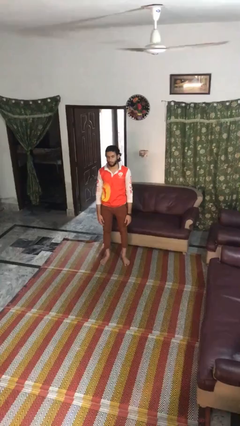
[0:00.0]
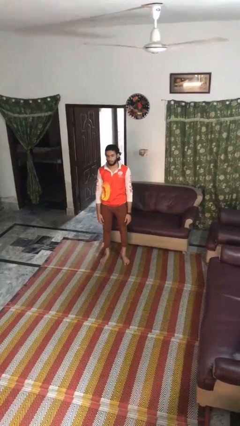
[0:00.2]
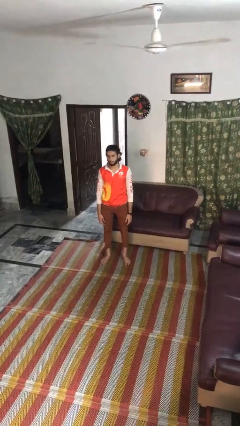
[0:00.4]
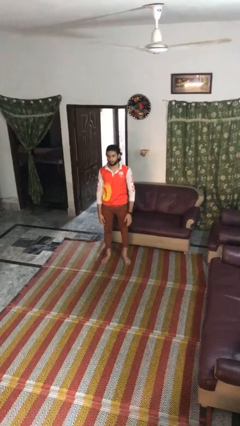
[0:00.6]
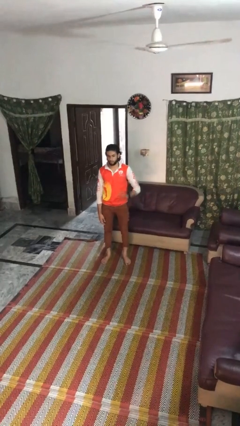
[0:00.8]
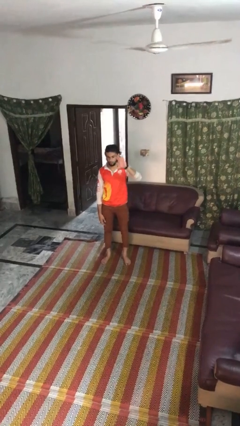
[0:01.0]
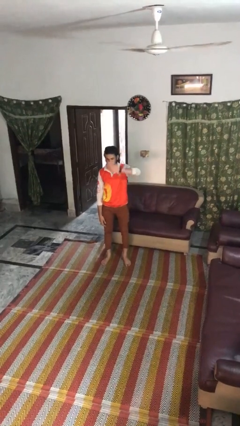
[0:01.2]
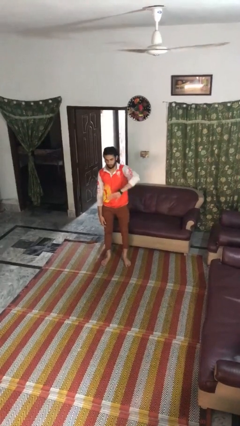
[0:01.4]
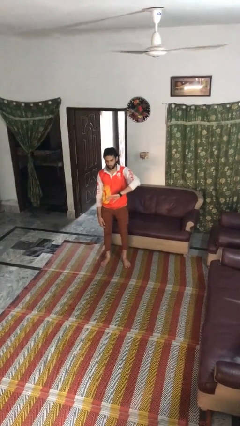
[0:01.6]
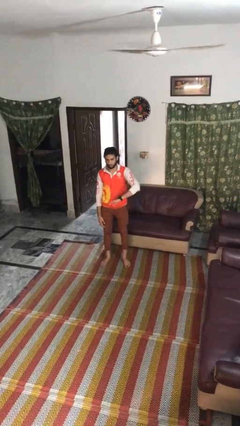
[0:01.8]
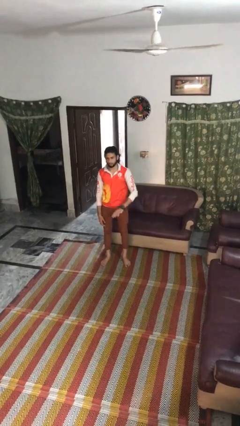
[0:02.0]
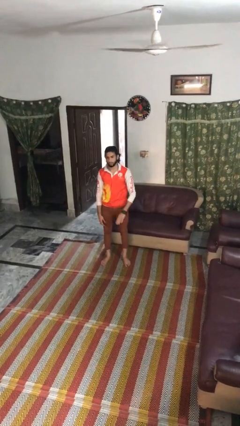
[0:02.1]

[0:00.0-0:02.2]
person gestures swipe down

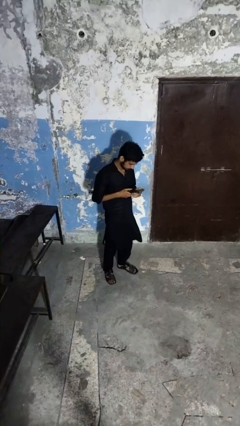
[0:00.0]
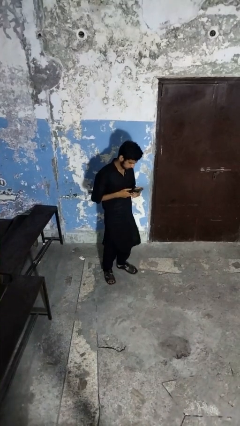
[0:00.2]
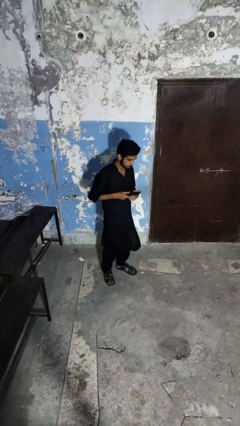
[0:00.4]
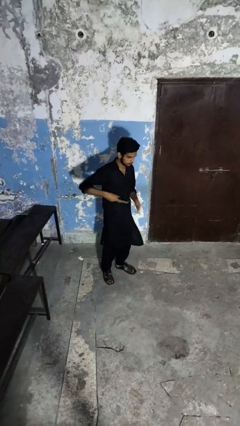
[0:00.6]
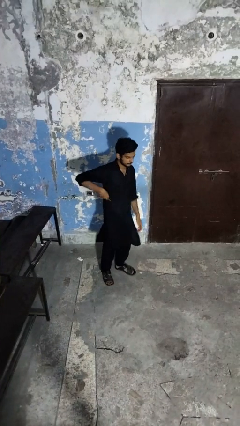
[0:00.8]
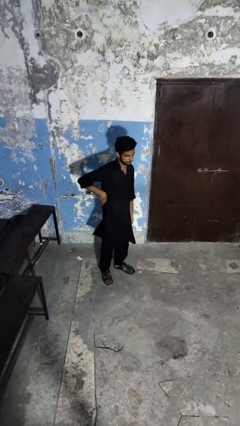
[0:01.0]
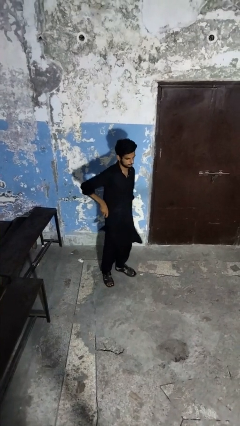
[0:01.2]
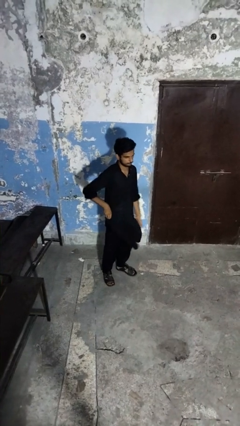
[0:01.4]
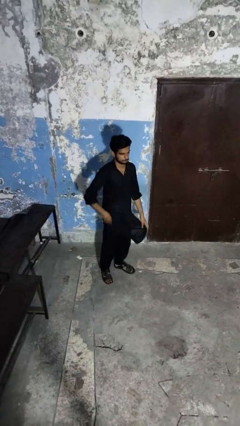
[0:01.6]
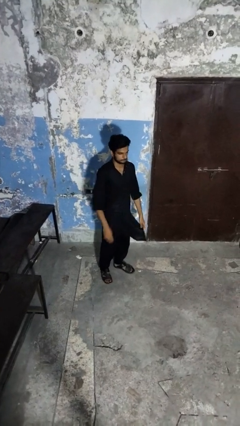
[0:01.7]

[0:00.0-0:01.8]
person puts phone into pocket

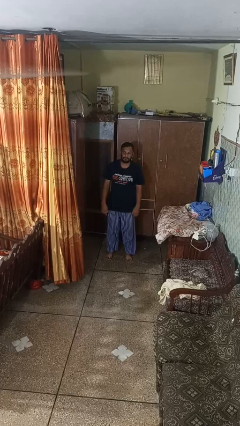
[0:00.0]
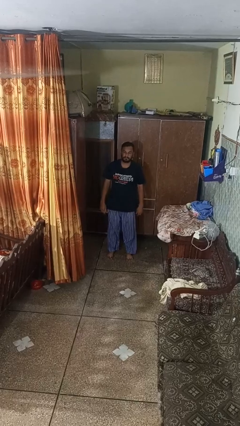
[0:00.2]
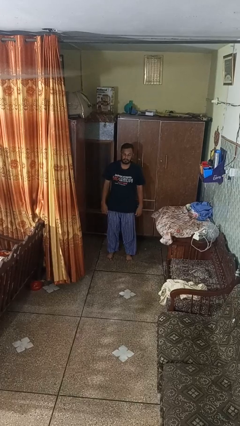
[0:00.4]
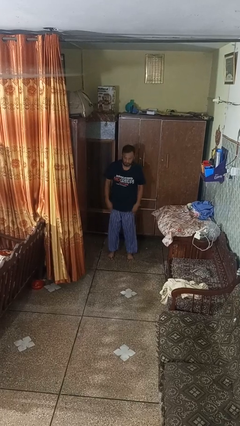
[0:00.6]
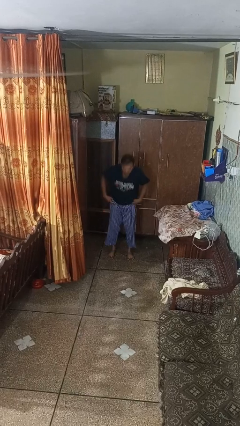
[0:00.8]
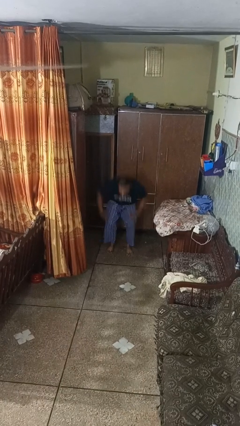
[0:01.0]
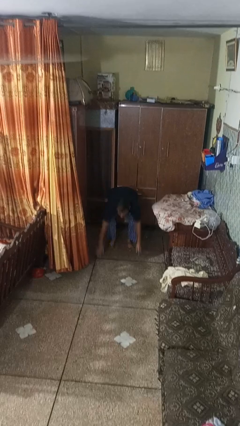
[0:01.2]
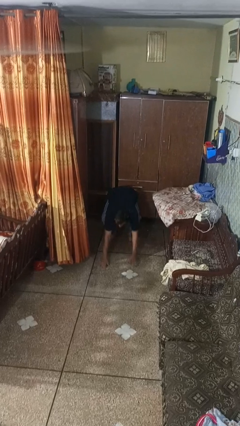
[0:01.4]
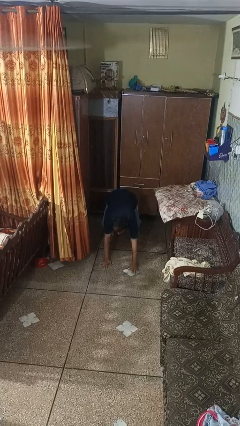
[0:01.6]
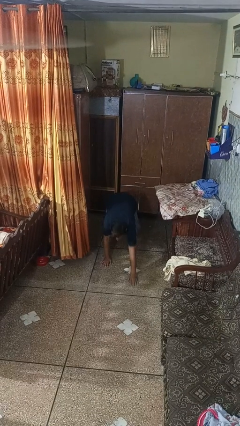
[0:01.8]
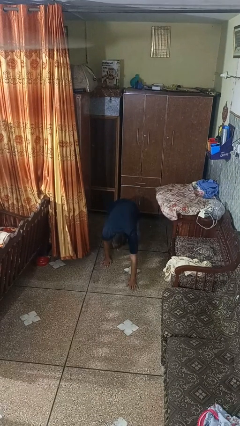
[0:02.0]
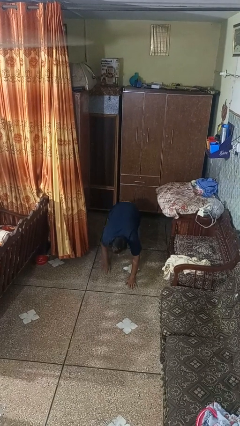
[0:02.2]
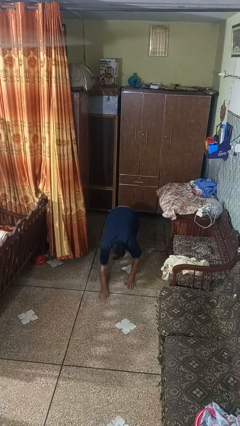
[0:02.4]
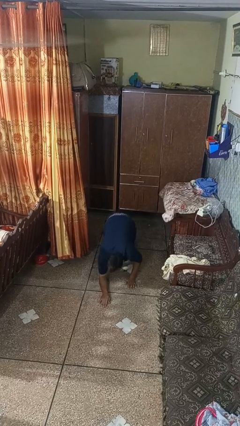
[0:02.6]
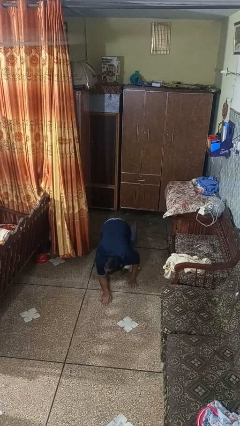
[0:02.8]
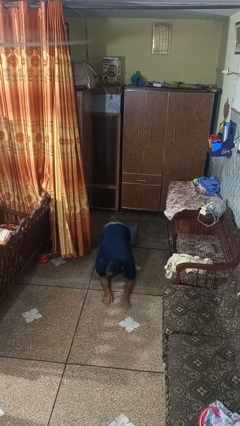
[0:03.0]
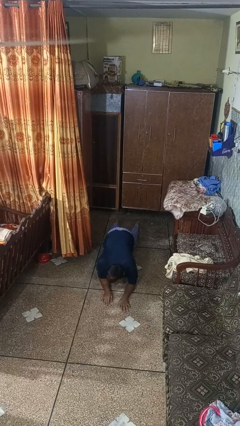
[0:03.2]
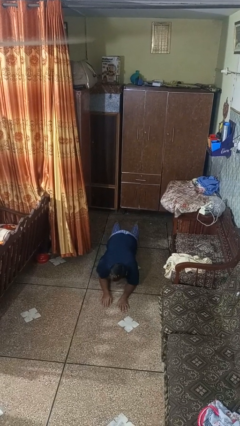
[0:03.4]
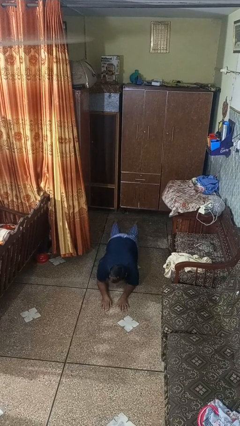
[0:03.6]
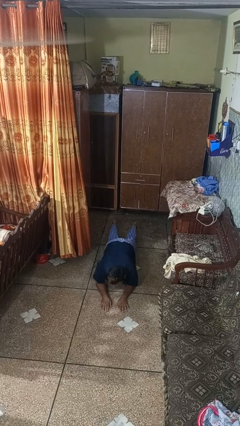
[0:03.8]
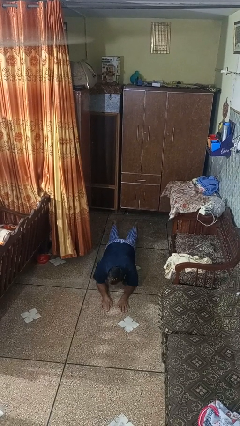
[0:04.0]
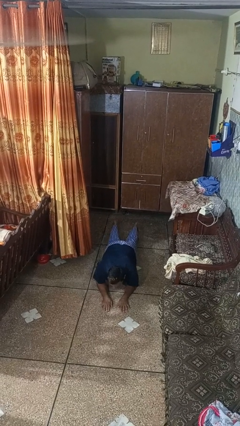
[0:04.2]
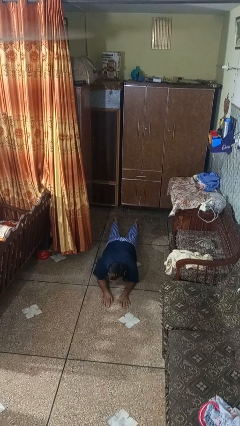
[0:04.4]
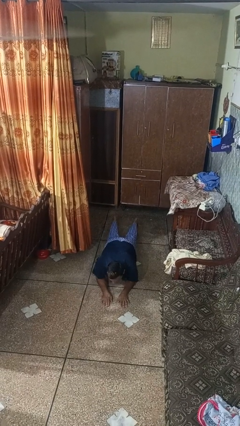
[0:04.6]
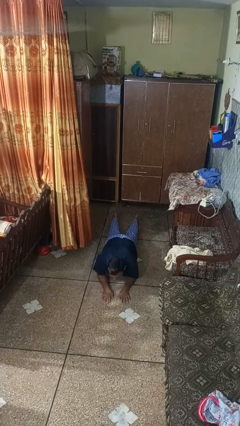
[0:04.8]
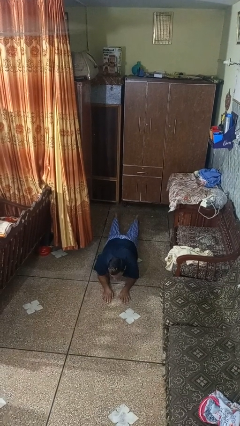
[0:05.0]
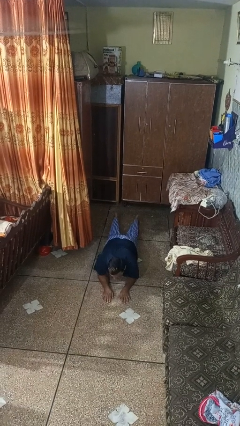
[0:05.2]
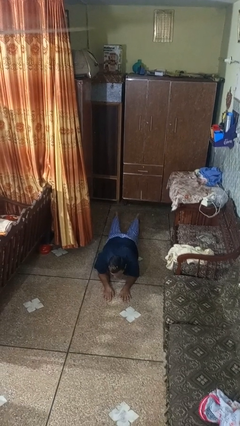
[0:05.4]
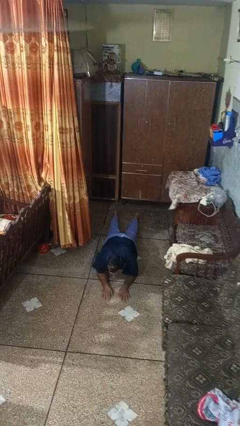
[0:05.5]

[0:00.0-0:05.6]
person exercises with plank

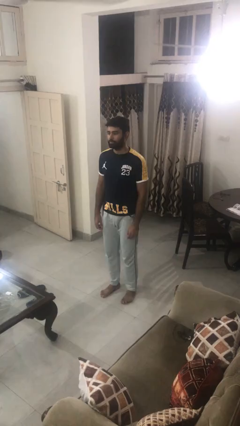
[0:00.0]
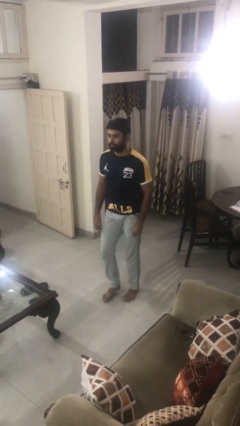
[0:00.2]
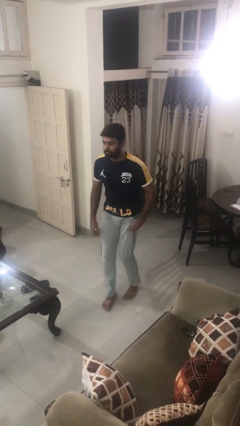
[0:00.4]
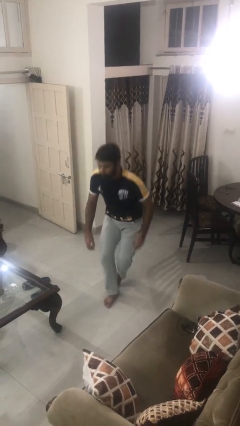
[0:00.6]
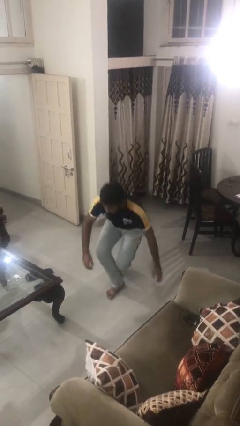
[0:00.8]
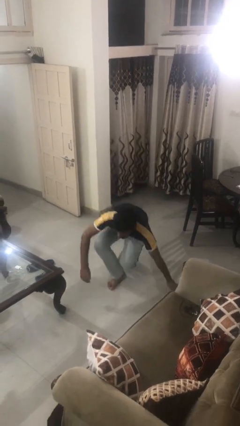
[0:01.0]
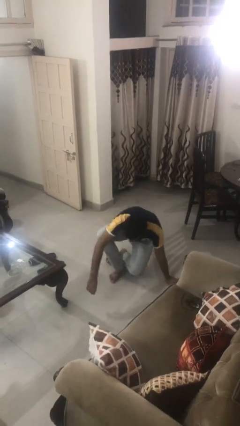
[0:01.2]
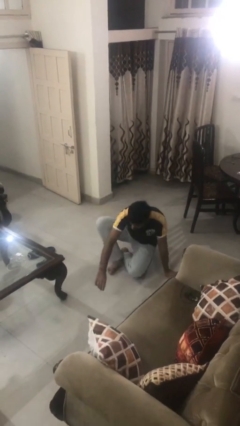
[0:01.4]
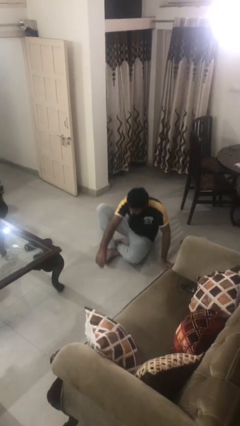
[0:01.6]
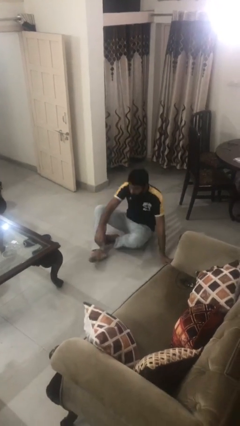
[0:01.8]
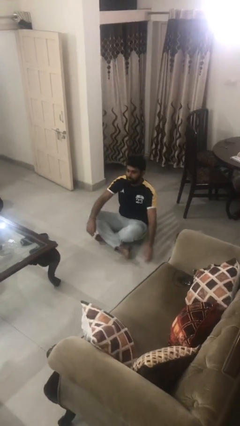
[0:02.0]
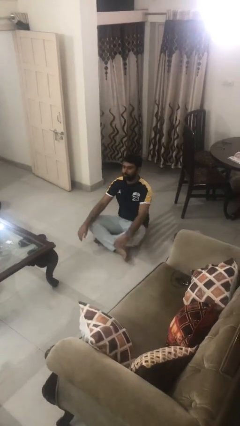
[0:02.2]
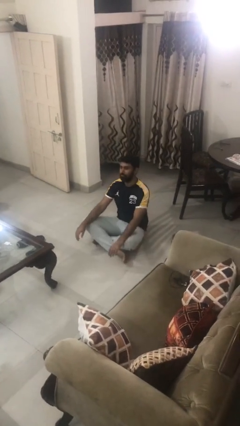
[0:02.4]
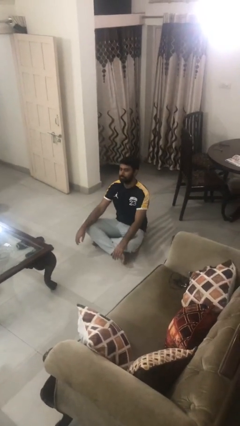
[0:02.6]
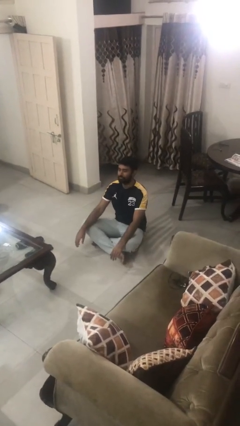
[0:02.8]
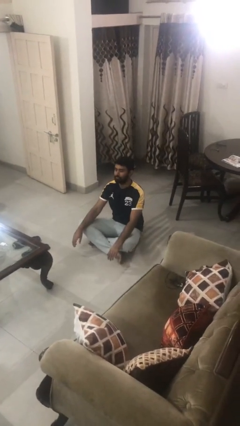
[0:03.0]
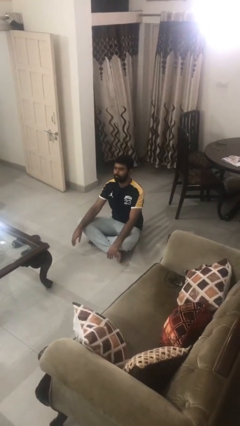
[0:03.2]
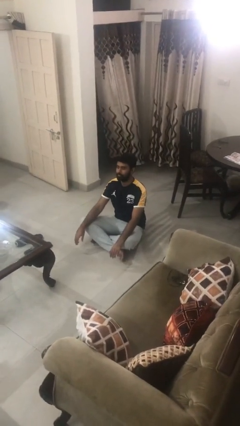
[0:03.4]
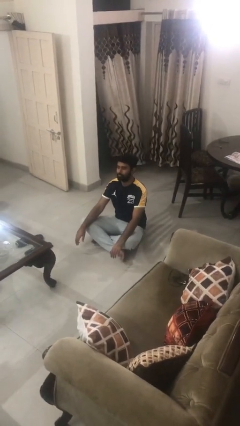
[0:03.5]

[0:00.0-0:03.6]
person sits crisscross

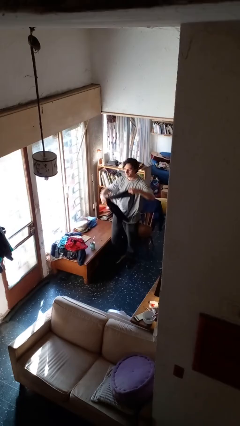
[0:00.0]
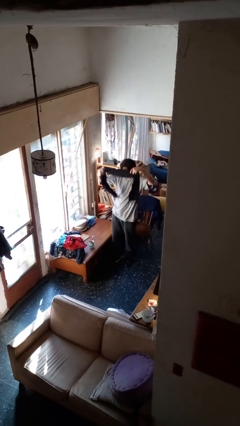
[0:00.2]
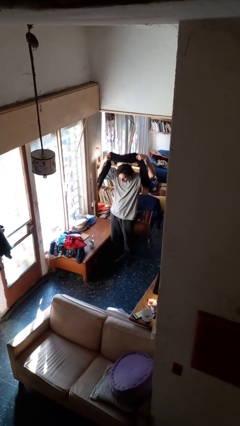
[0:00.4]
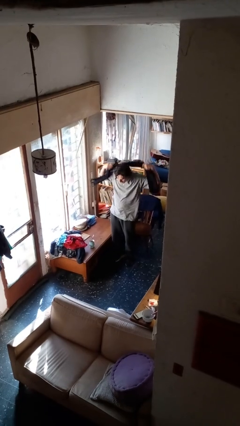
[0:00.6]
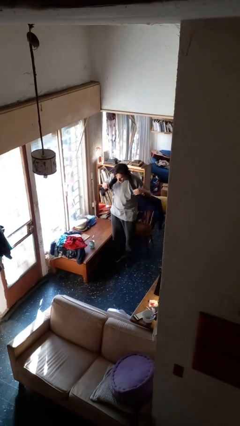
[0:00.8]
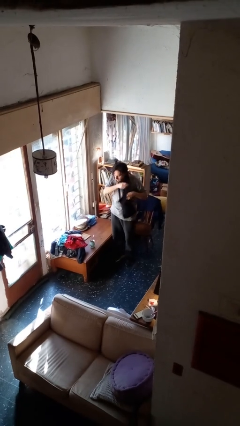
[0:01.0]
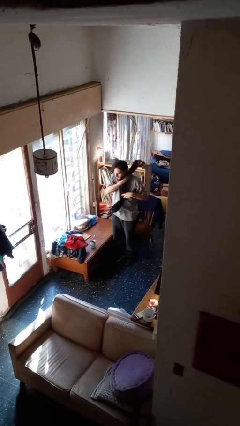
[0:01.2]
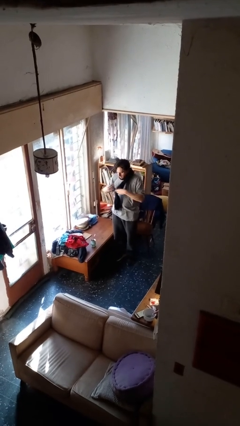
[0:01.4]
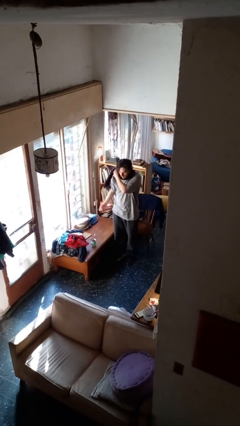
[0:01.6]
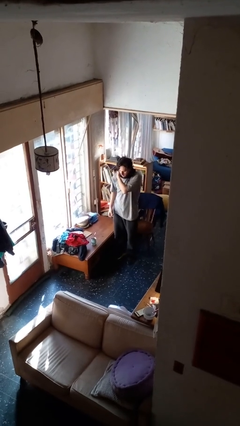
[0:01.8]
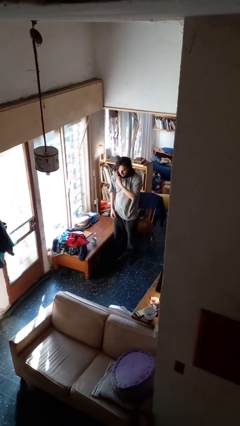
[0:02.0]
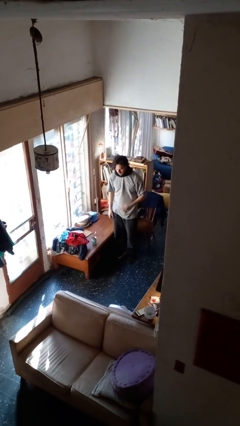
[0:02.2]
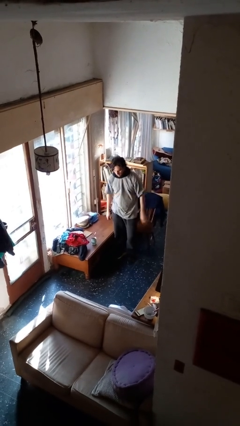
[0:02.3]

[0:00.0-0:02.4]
person puts on scarf

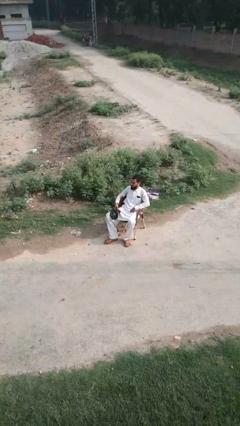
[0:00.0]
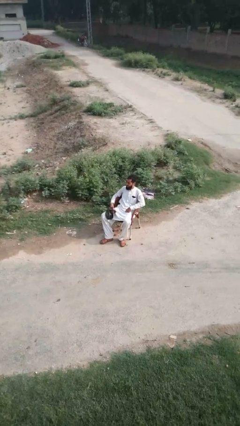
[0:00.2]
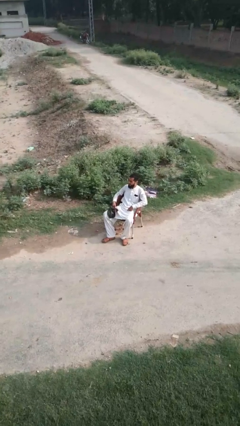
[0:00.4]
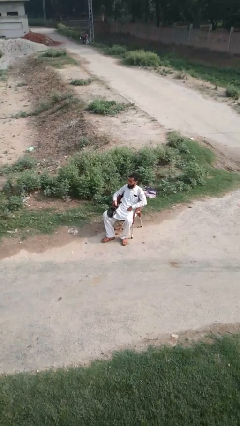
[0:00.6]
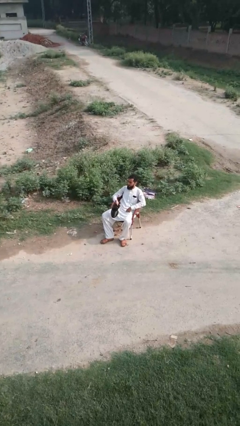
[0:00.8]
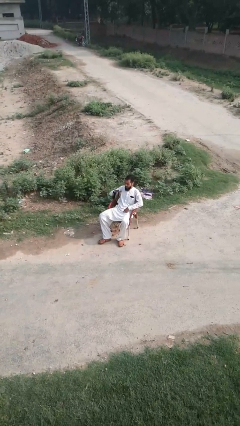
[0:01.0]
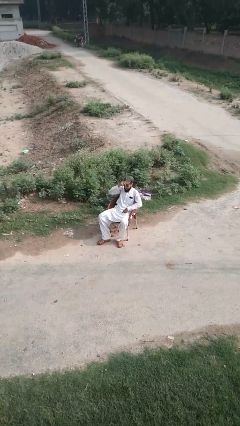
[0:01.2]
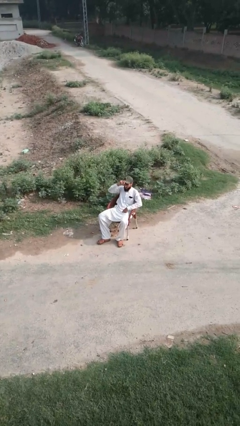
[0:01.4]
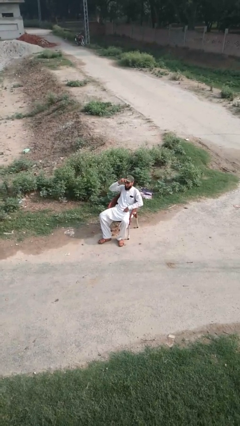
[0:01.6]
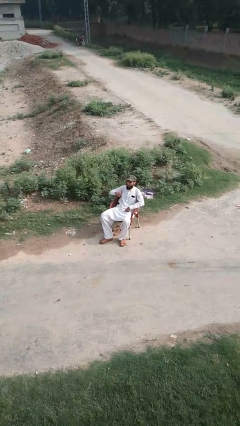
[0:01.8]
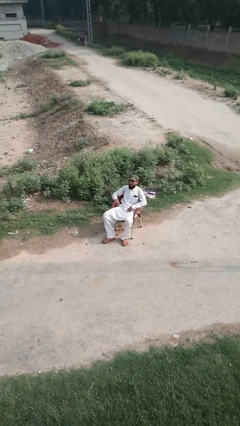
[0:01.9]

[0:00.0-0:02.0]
person puts on hat
